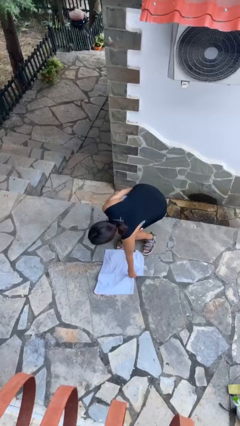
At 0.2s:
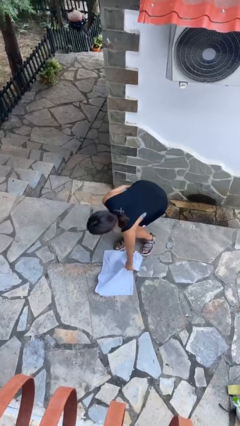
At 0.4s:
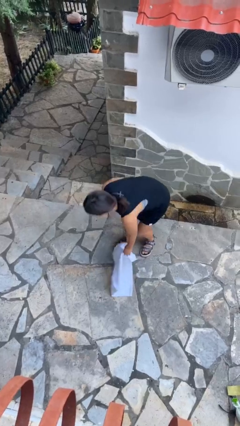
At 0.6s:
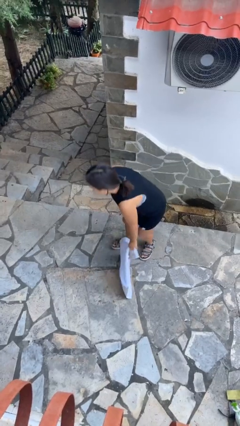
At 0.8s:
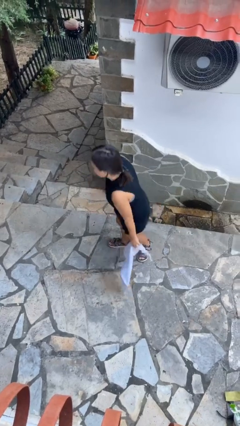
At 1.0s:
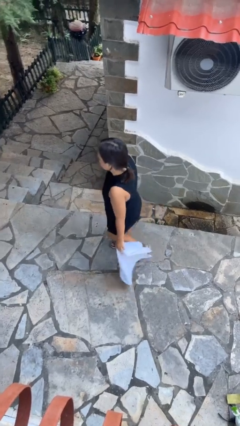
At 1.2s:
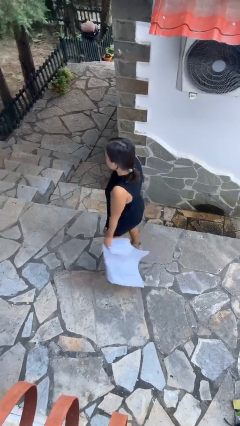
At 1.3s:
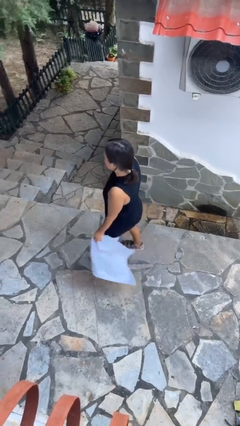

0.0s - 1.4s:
person picks up object from floor

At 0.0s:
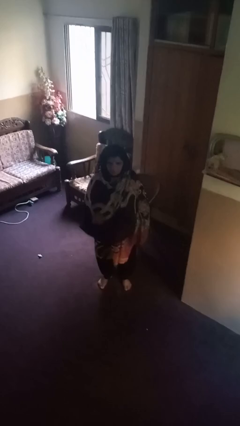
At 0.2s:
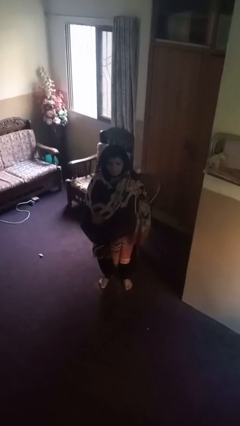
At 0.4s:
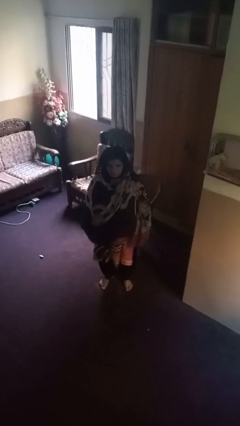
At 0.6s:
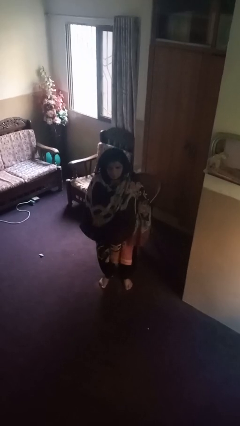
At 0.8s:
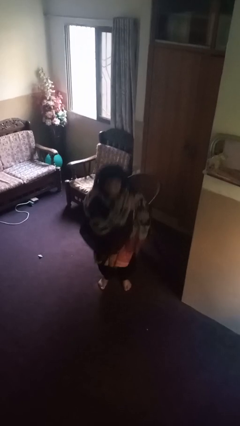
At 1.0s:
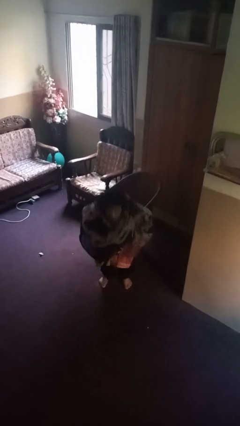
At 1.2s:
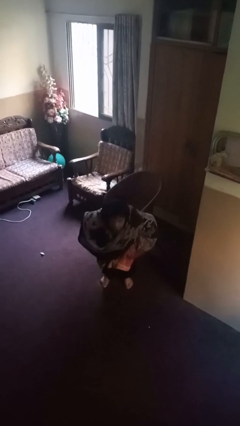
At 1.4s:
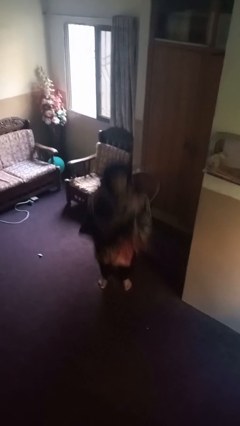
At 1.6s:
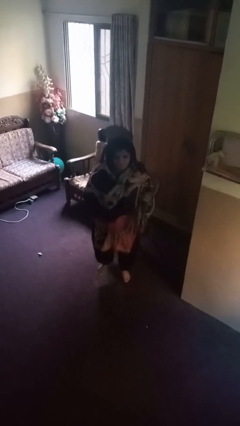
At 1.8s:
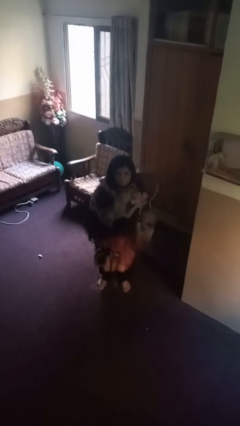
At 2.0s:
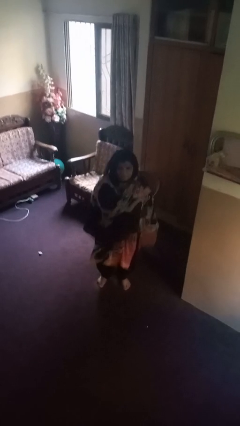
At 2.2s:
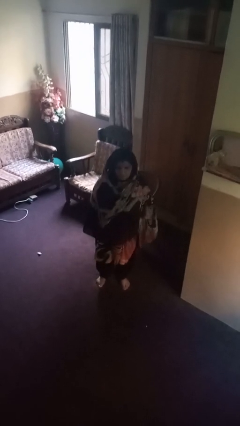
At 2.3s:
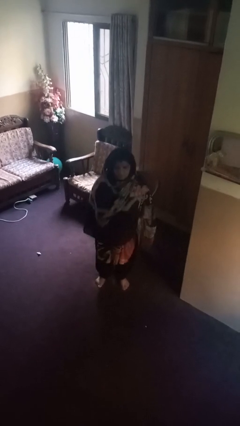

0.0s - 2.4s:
person jumps

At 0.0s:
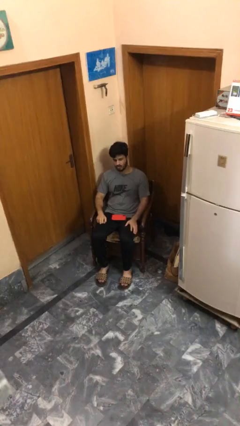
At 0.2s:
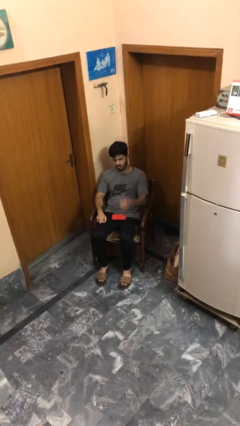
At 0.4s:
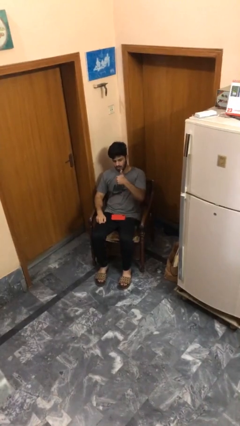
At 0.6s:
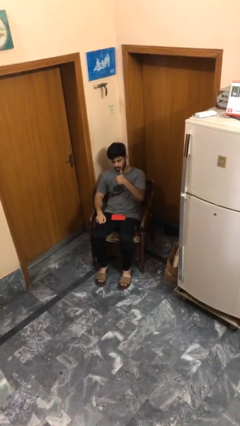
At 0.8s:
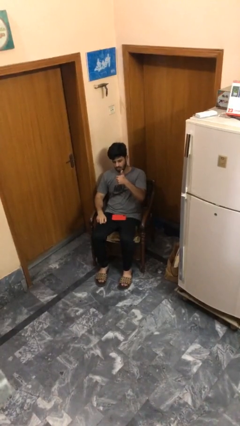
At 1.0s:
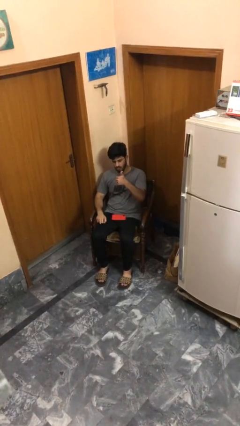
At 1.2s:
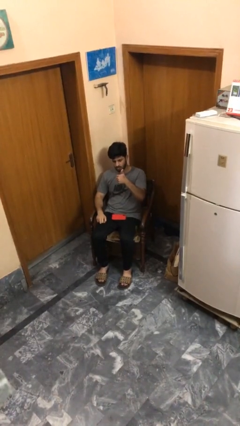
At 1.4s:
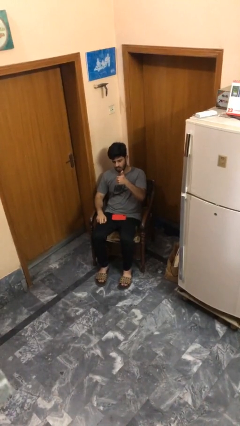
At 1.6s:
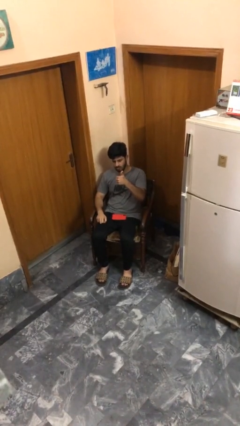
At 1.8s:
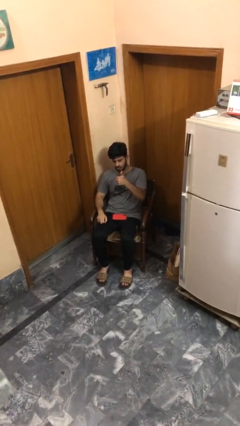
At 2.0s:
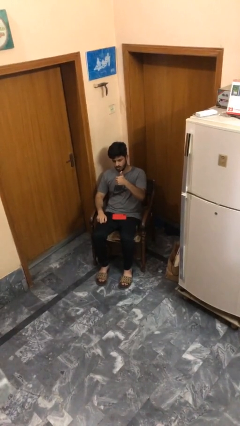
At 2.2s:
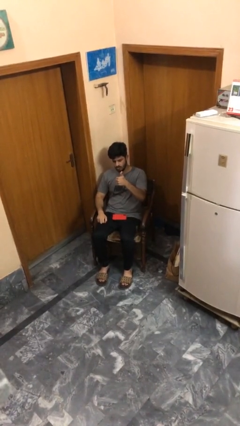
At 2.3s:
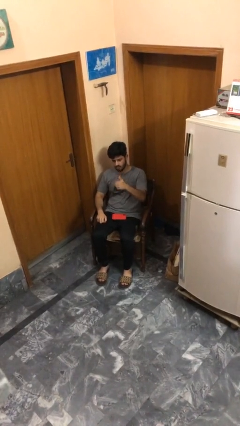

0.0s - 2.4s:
person gestures thumbs up

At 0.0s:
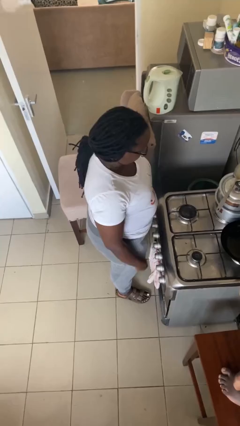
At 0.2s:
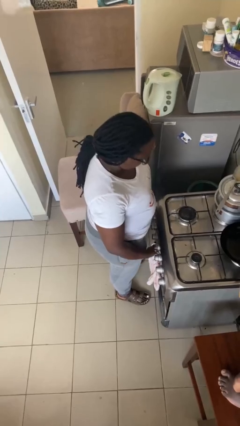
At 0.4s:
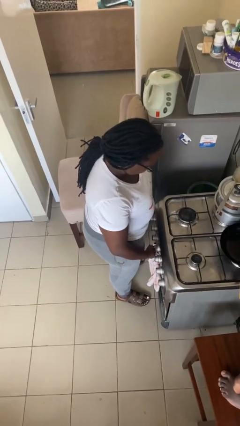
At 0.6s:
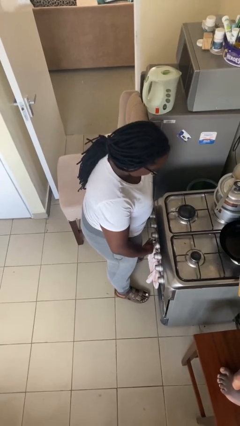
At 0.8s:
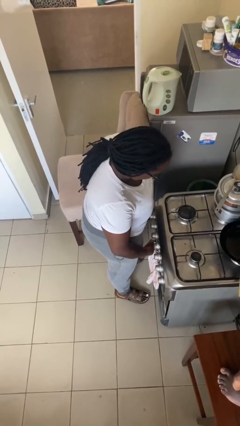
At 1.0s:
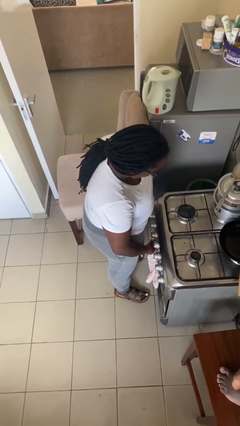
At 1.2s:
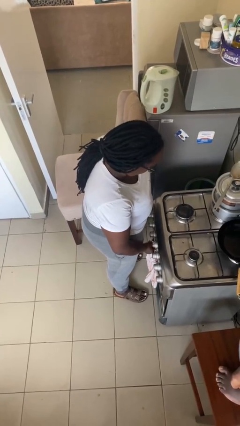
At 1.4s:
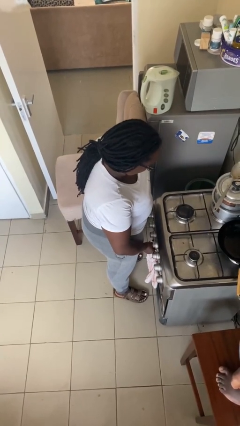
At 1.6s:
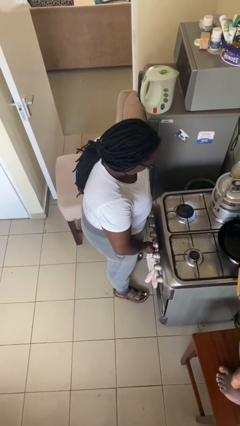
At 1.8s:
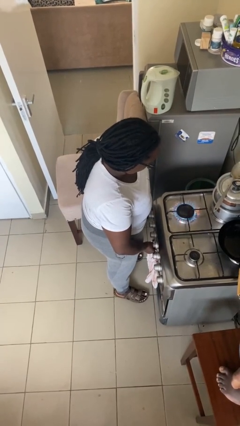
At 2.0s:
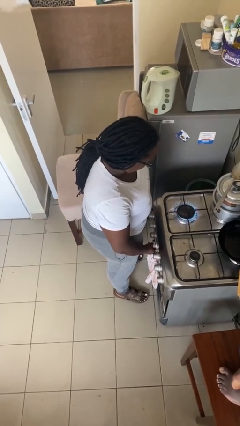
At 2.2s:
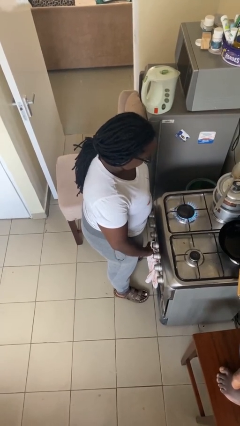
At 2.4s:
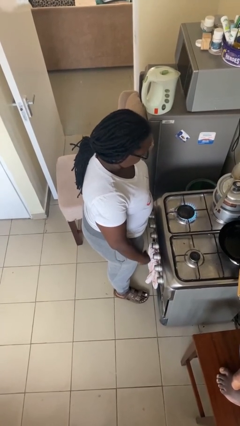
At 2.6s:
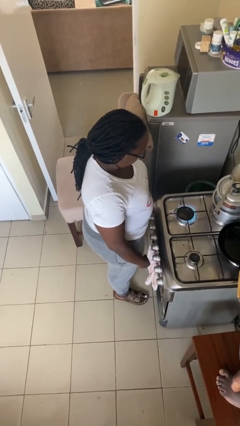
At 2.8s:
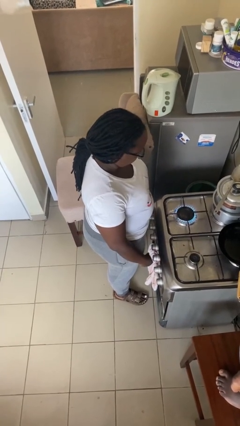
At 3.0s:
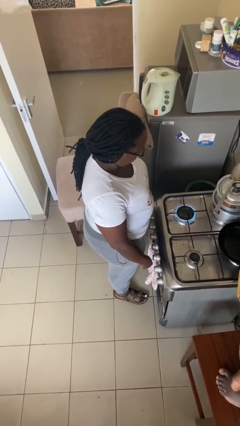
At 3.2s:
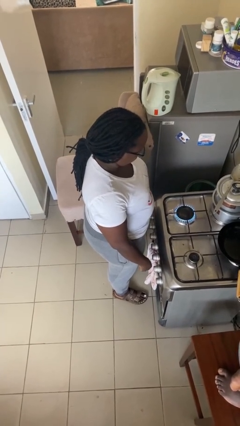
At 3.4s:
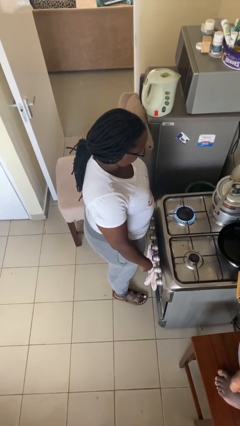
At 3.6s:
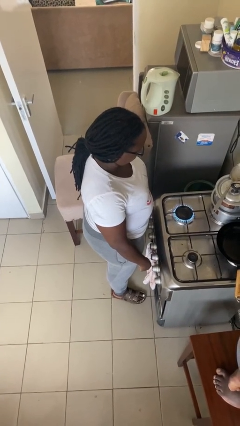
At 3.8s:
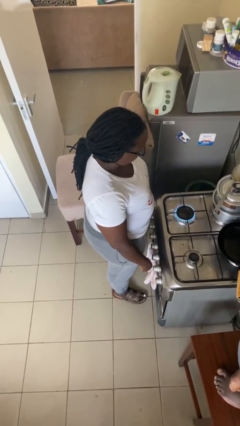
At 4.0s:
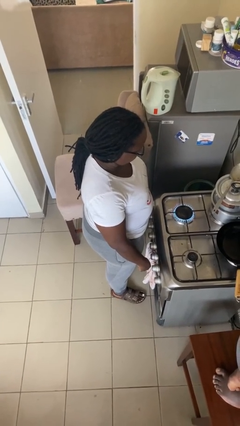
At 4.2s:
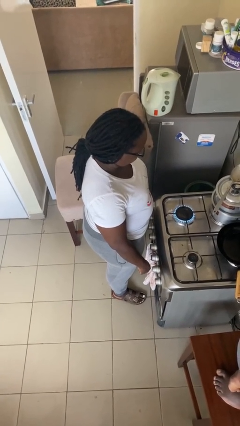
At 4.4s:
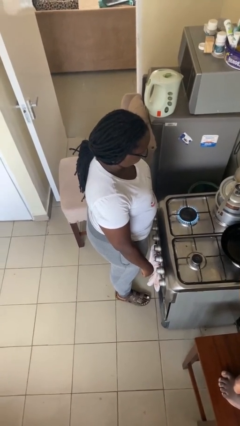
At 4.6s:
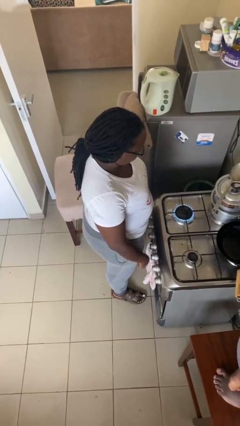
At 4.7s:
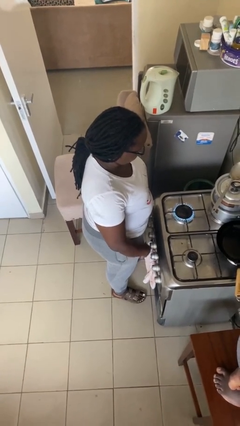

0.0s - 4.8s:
person turns on stovetop

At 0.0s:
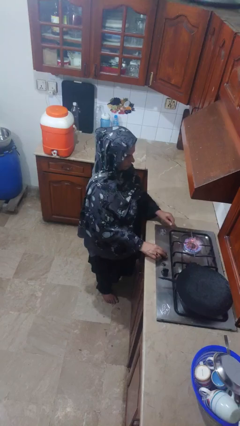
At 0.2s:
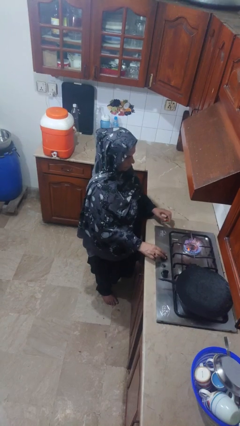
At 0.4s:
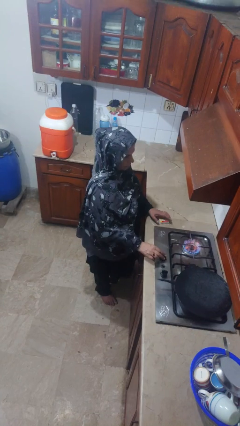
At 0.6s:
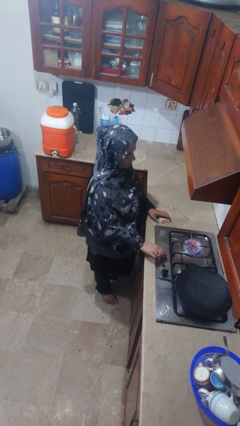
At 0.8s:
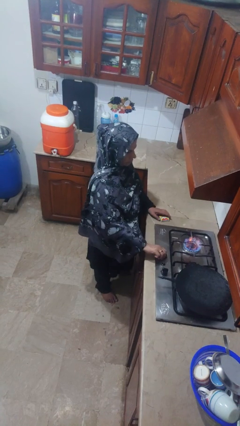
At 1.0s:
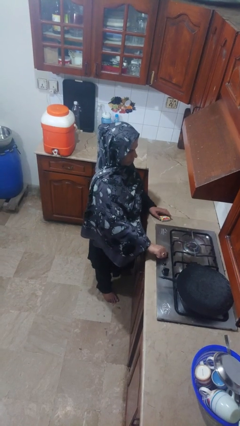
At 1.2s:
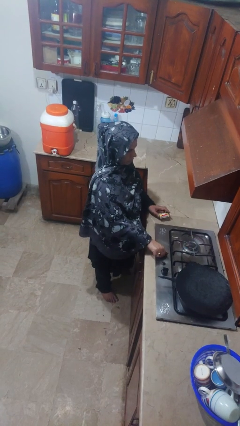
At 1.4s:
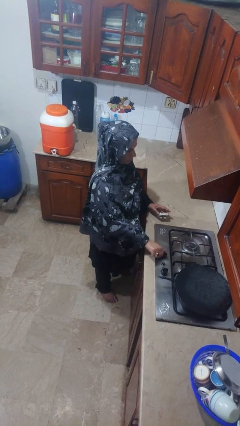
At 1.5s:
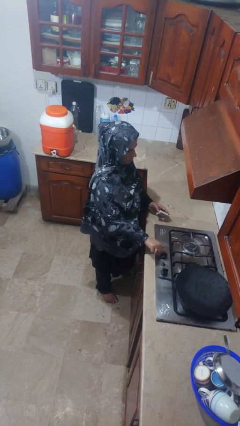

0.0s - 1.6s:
person turns off stovetop

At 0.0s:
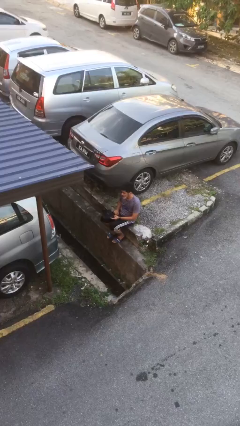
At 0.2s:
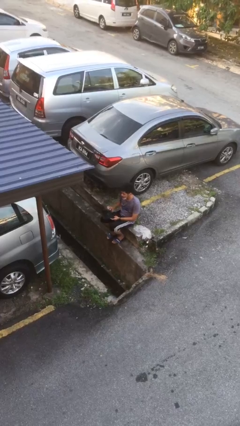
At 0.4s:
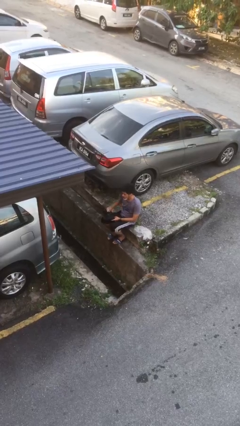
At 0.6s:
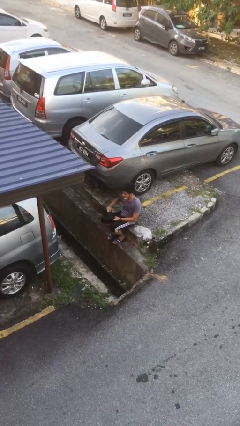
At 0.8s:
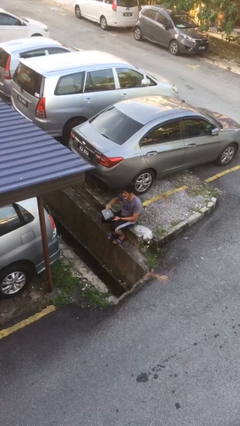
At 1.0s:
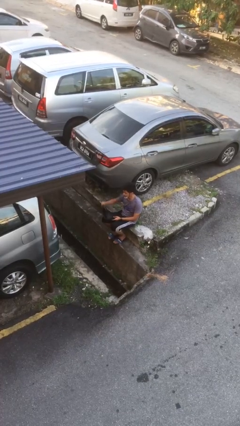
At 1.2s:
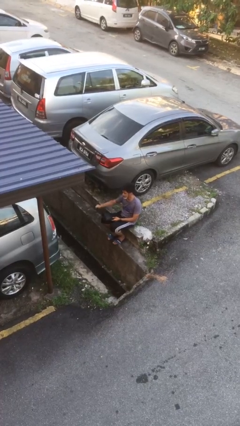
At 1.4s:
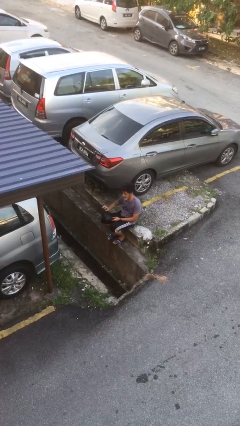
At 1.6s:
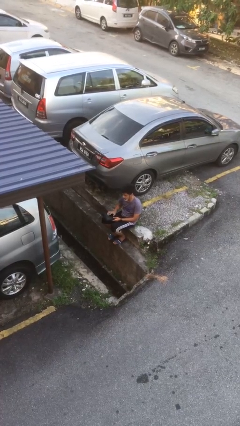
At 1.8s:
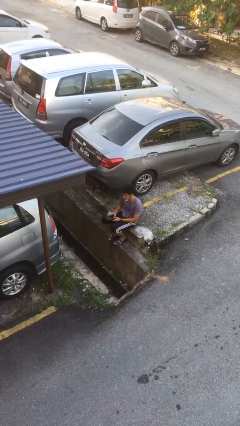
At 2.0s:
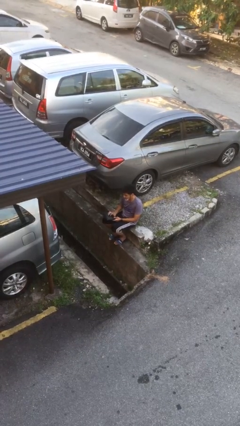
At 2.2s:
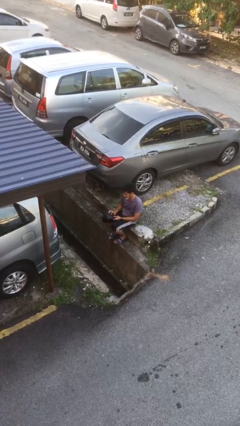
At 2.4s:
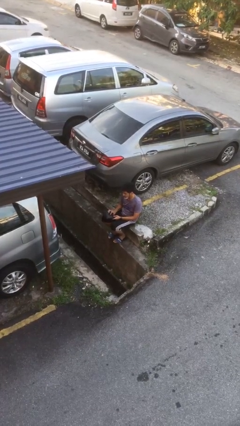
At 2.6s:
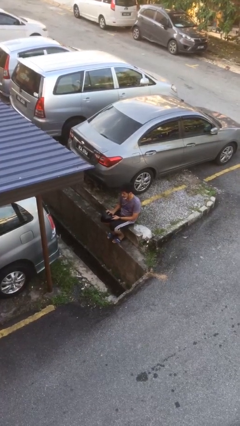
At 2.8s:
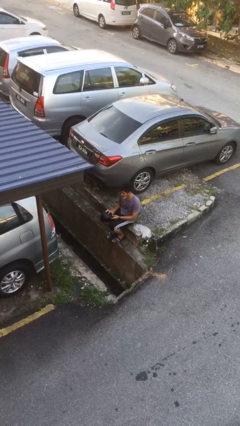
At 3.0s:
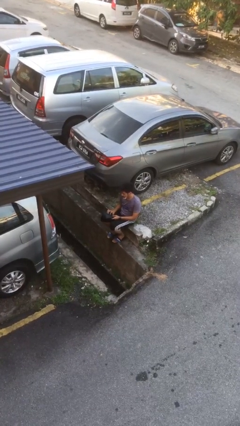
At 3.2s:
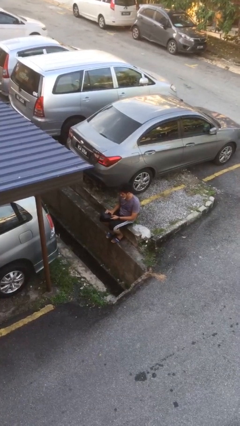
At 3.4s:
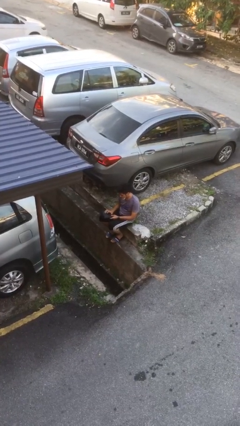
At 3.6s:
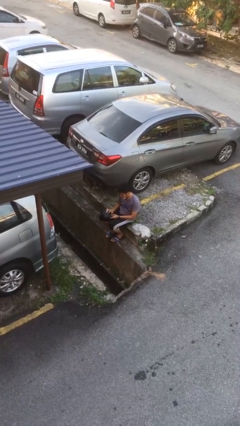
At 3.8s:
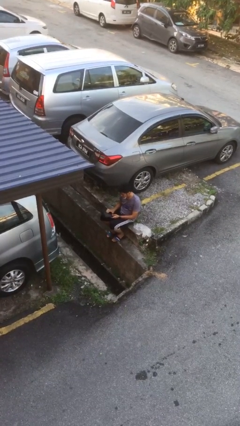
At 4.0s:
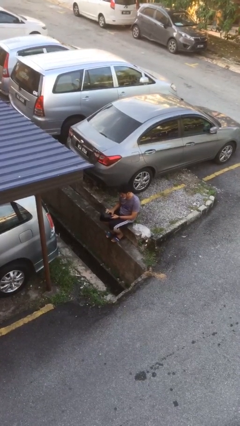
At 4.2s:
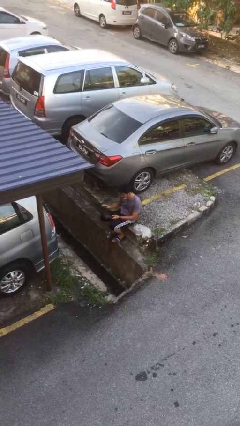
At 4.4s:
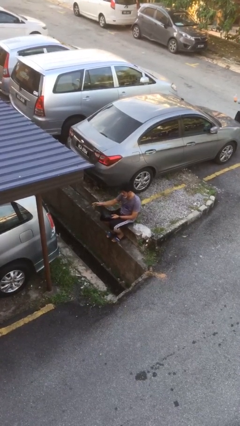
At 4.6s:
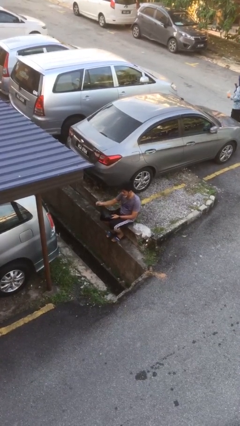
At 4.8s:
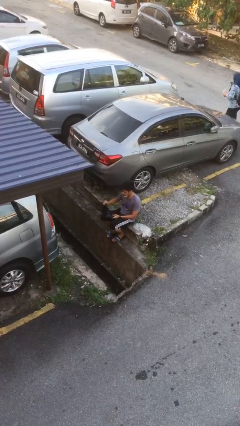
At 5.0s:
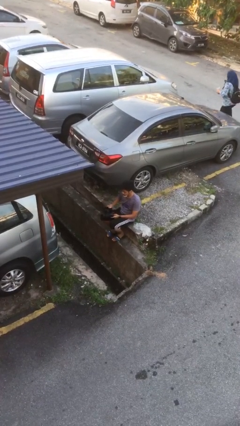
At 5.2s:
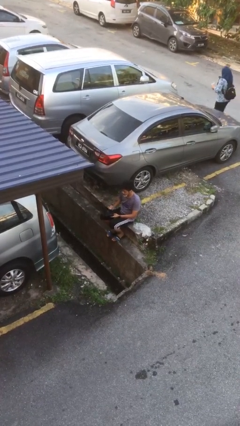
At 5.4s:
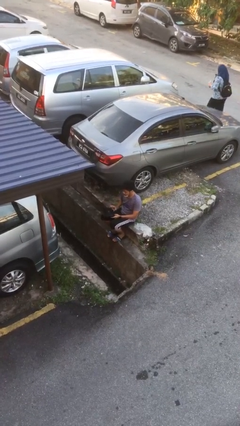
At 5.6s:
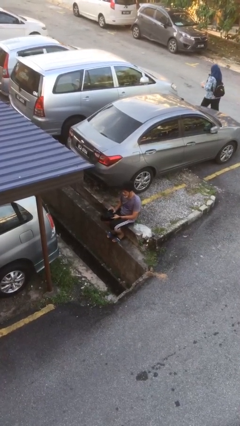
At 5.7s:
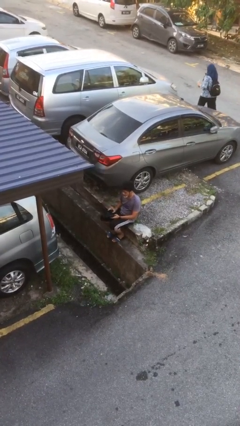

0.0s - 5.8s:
person interacts with laptop
